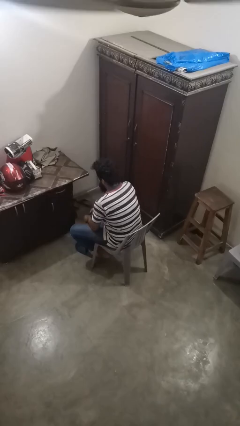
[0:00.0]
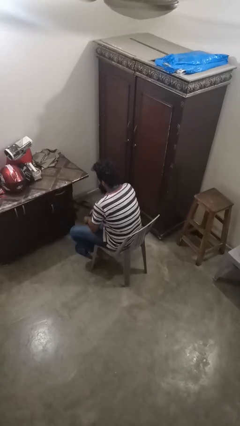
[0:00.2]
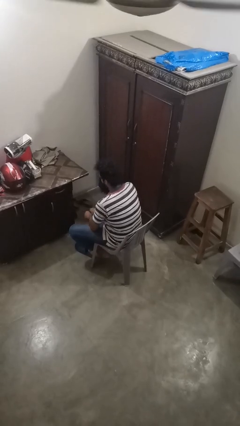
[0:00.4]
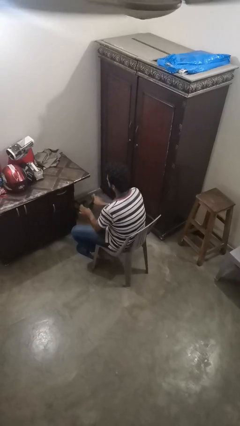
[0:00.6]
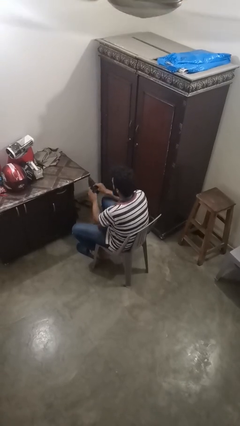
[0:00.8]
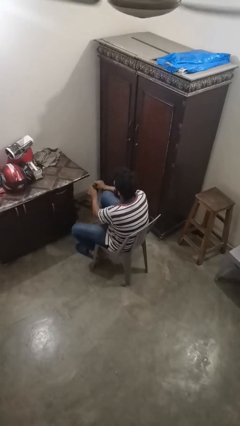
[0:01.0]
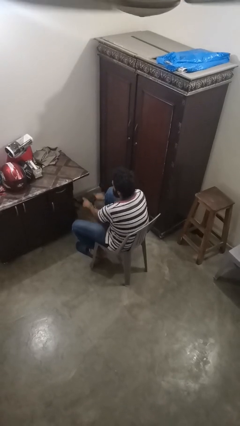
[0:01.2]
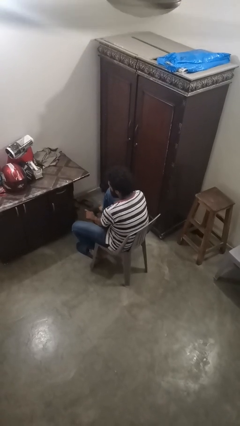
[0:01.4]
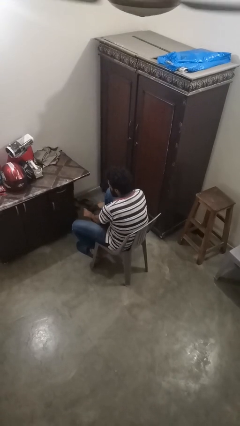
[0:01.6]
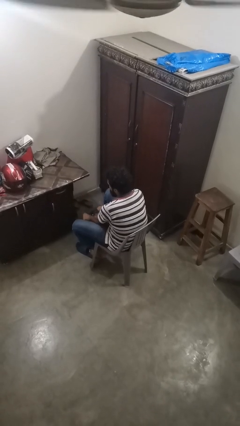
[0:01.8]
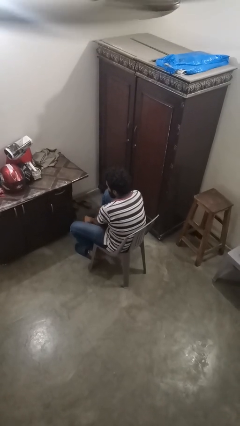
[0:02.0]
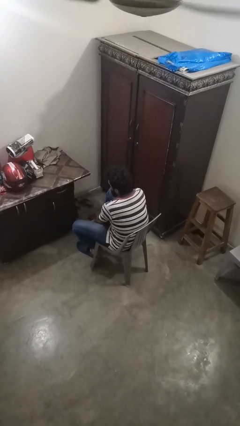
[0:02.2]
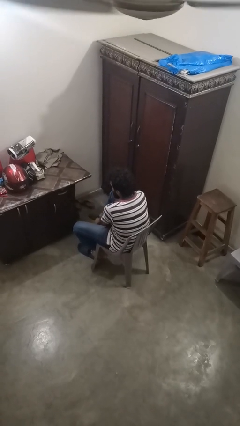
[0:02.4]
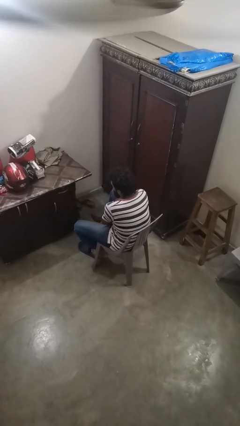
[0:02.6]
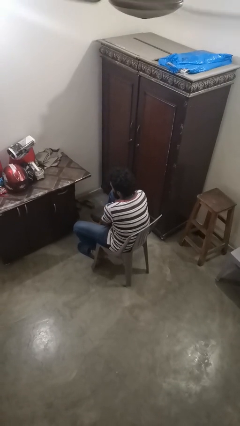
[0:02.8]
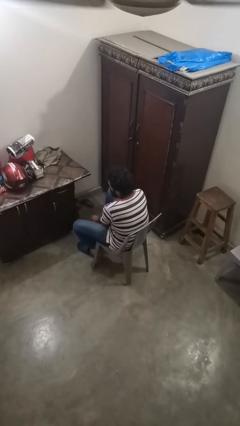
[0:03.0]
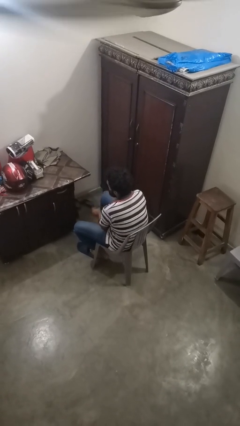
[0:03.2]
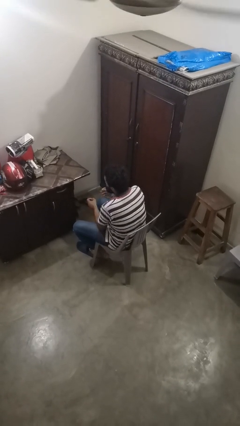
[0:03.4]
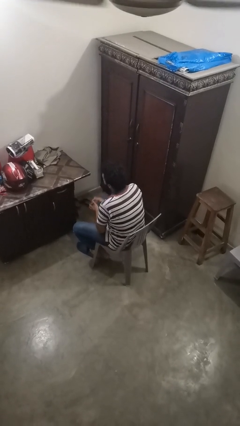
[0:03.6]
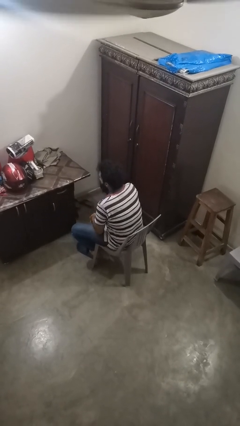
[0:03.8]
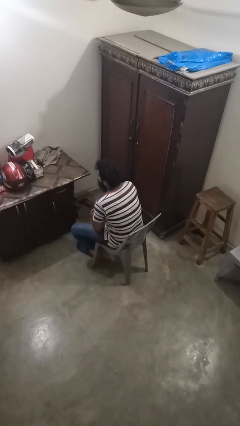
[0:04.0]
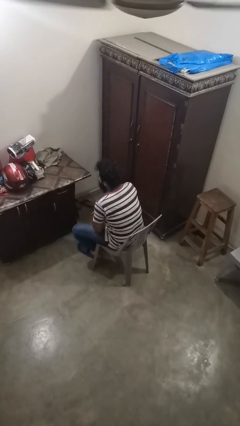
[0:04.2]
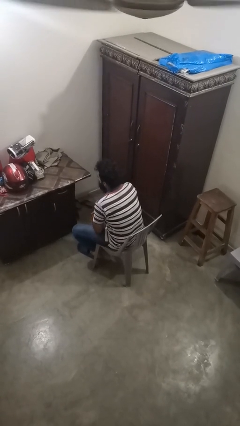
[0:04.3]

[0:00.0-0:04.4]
person puts on socks

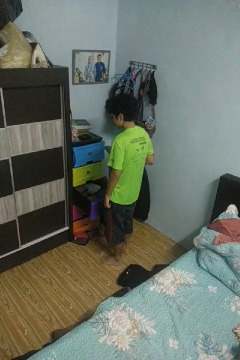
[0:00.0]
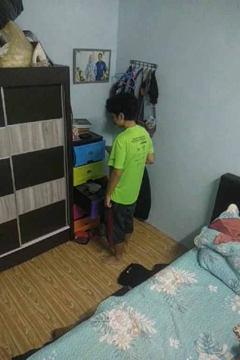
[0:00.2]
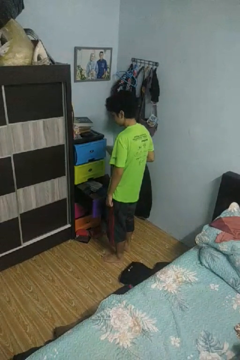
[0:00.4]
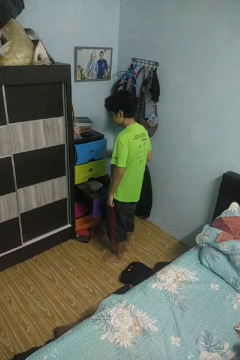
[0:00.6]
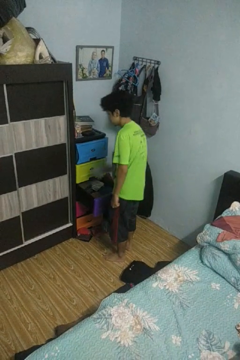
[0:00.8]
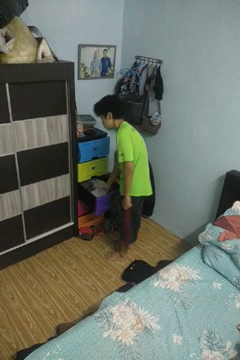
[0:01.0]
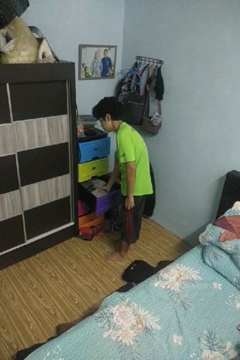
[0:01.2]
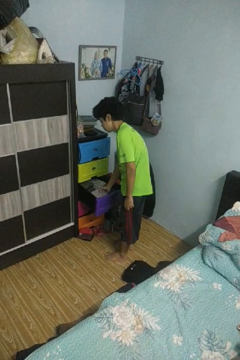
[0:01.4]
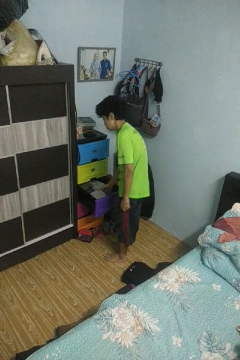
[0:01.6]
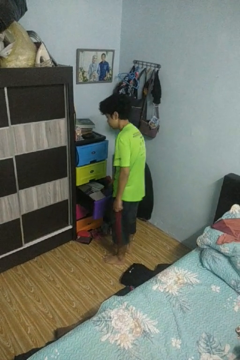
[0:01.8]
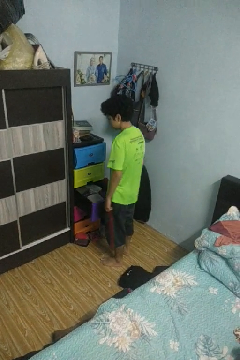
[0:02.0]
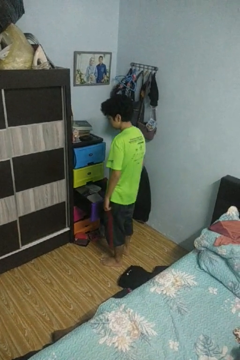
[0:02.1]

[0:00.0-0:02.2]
person puts clothes into dresser

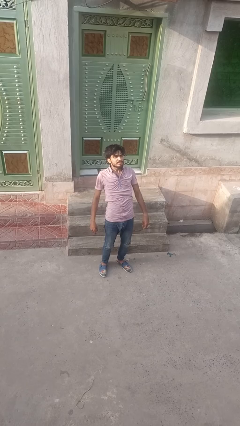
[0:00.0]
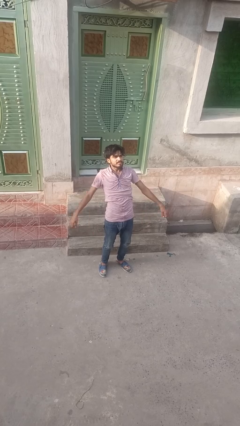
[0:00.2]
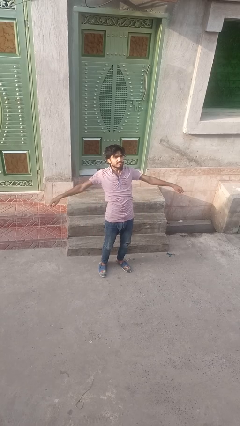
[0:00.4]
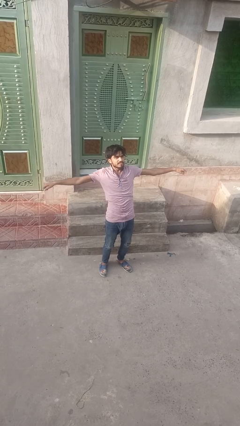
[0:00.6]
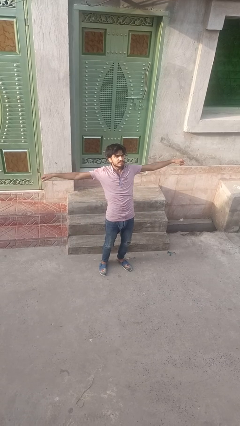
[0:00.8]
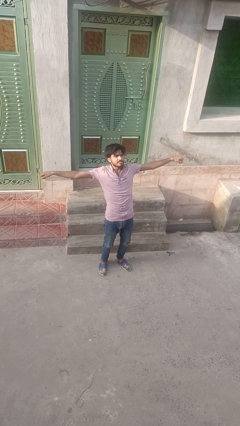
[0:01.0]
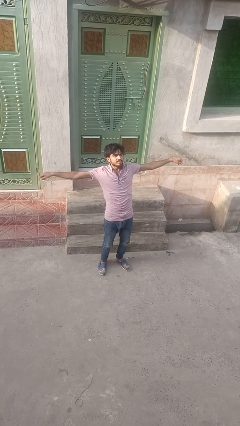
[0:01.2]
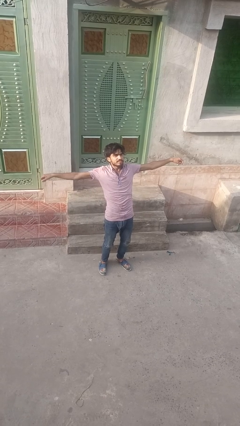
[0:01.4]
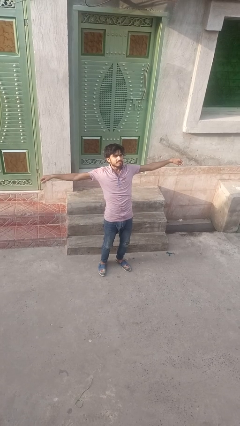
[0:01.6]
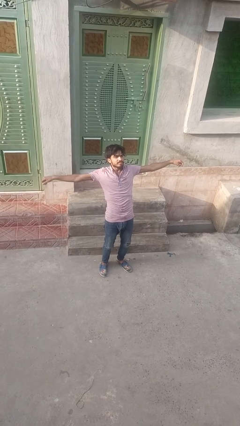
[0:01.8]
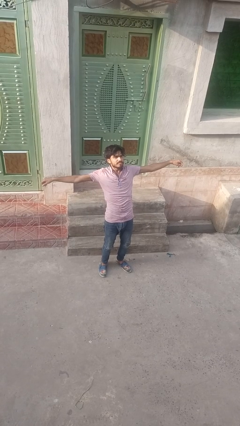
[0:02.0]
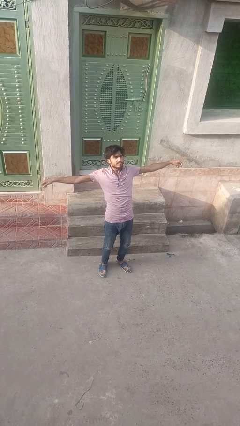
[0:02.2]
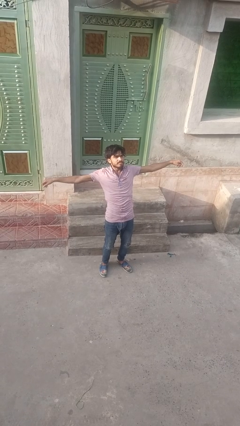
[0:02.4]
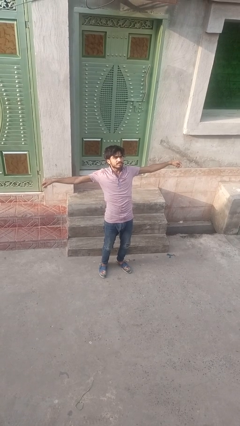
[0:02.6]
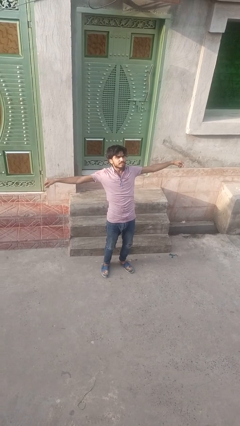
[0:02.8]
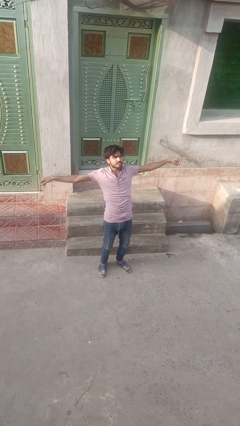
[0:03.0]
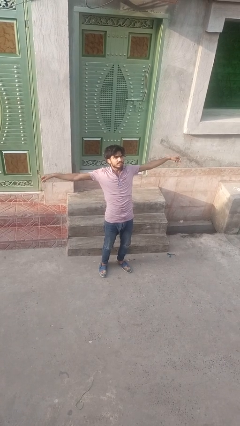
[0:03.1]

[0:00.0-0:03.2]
person stretches arms to side

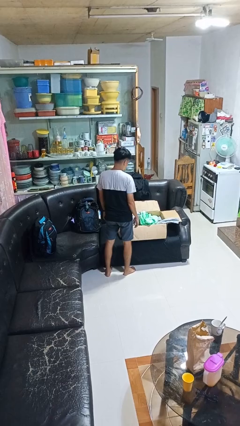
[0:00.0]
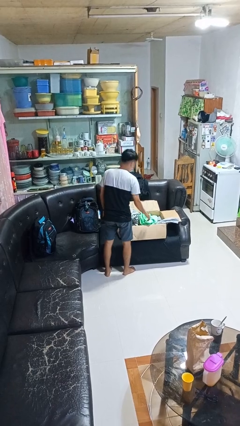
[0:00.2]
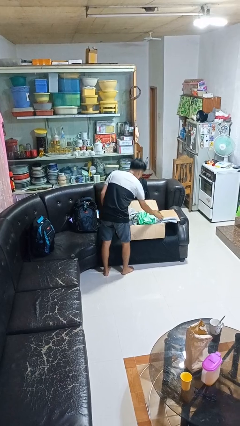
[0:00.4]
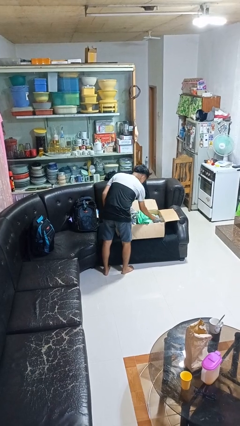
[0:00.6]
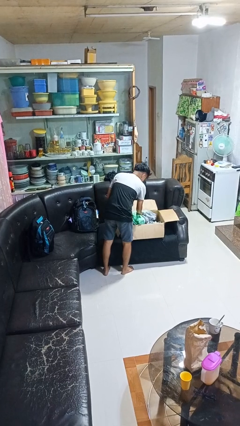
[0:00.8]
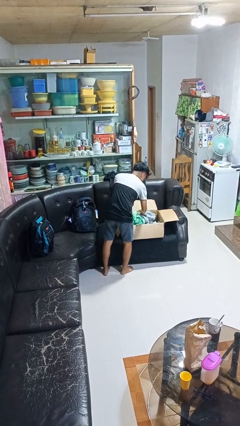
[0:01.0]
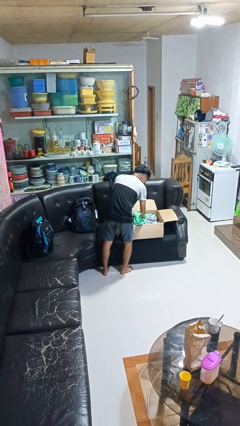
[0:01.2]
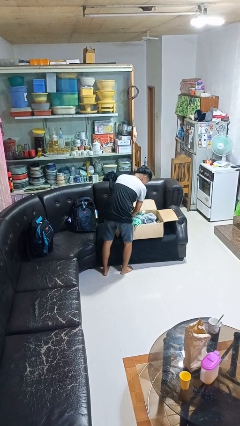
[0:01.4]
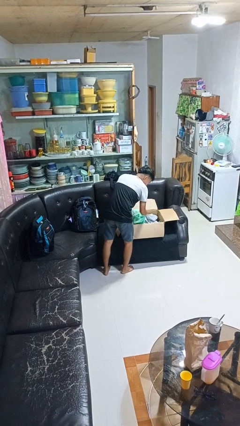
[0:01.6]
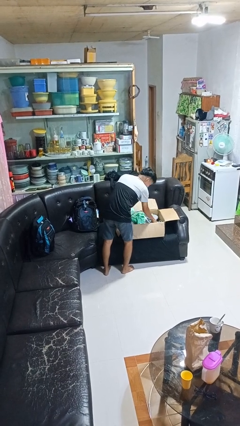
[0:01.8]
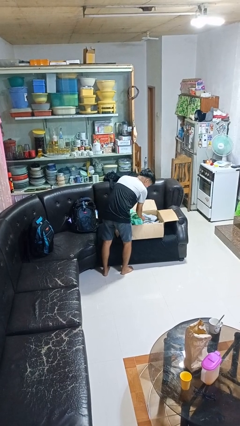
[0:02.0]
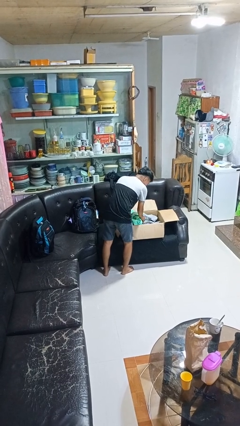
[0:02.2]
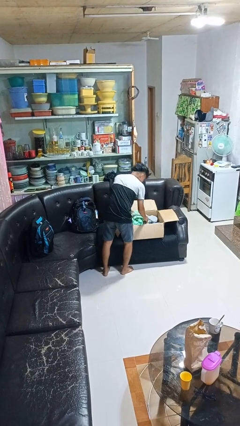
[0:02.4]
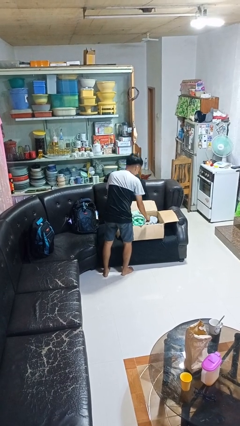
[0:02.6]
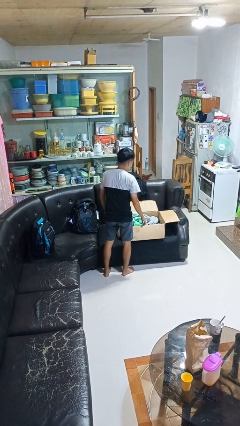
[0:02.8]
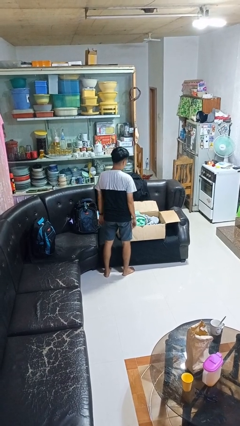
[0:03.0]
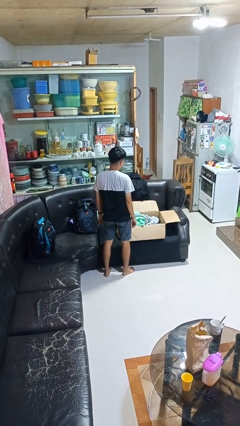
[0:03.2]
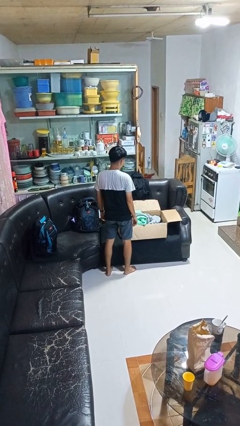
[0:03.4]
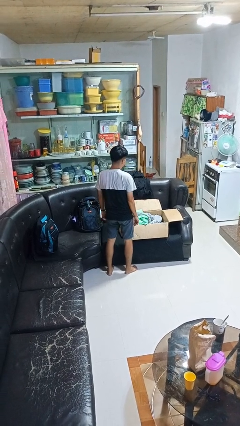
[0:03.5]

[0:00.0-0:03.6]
person searches in box

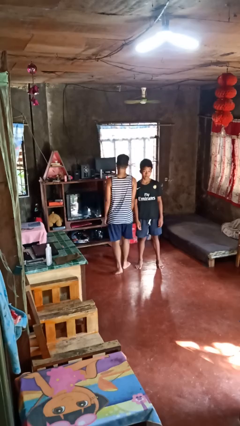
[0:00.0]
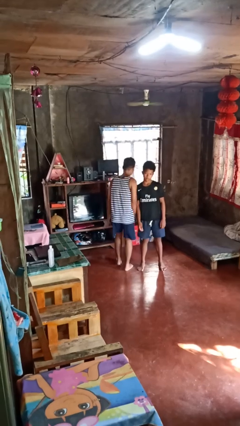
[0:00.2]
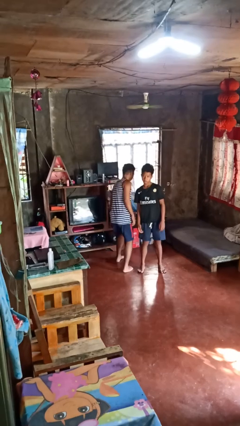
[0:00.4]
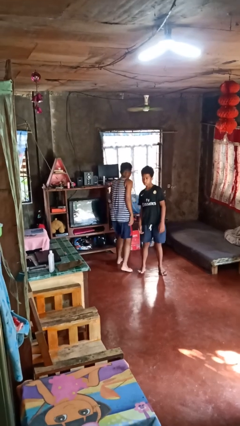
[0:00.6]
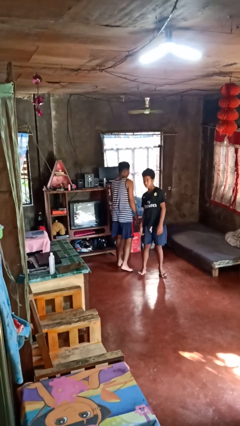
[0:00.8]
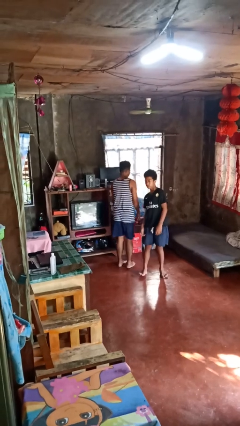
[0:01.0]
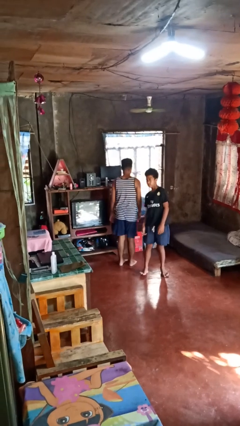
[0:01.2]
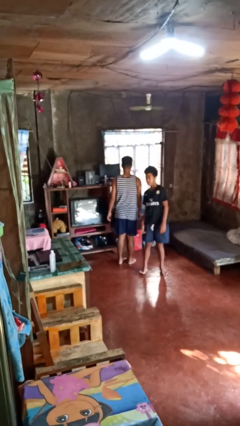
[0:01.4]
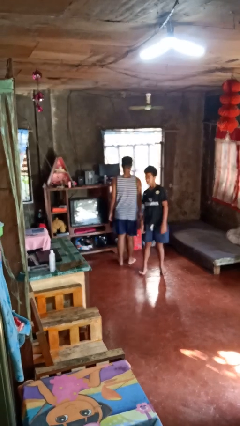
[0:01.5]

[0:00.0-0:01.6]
person bumps into person

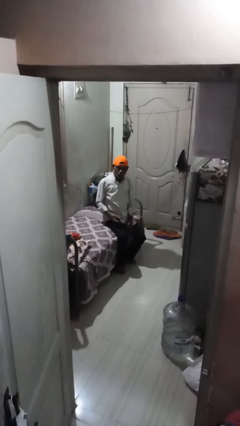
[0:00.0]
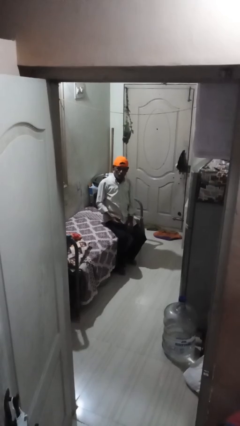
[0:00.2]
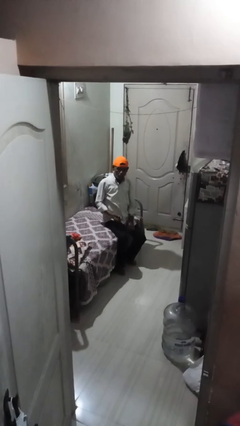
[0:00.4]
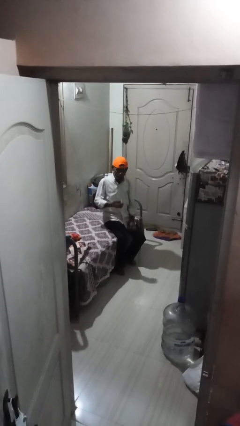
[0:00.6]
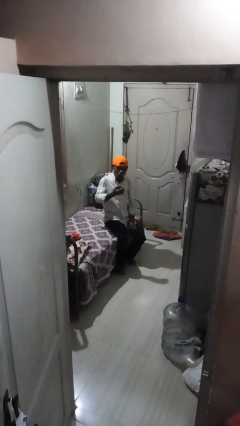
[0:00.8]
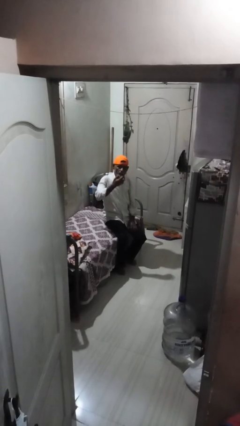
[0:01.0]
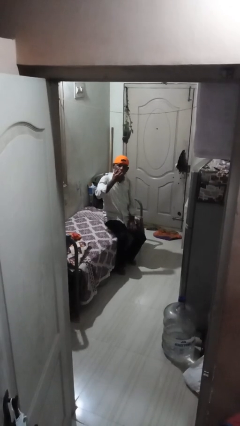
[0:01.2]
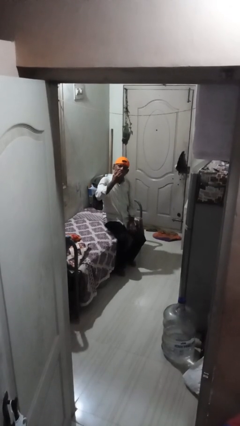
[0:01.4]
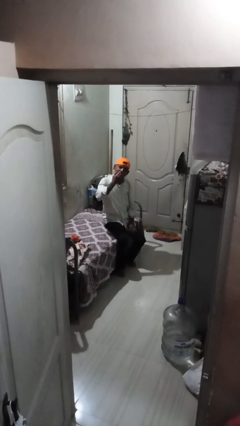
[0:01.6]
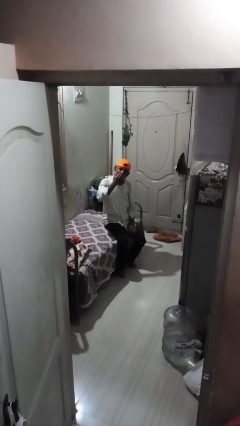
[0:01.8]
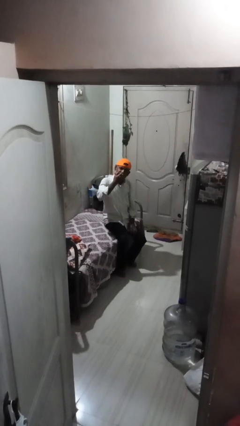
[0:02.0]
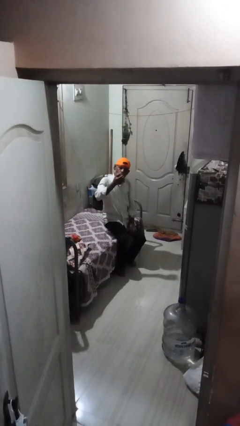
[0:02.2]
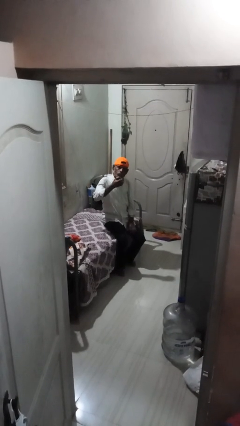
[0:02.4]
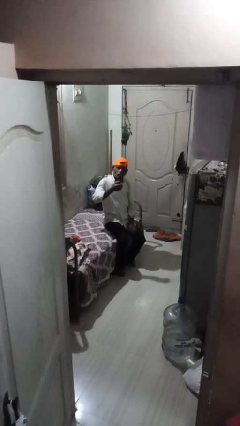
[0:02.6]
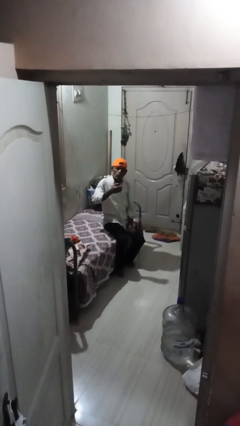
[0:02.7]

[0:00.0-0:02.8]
person eats apple
